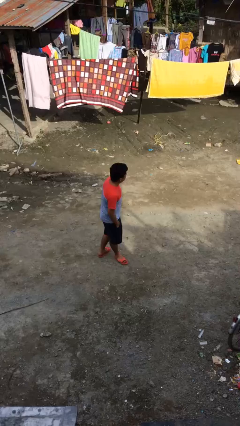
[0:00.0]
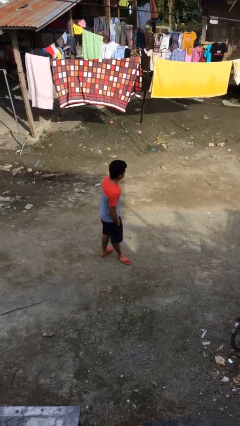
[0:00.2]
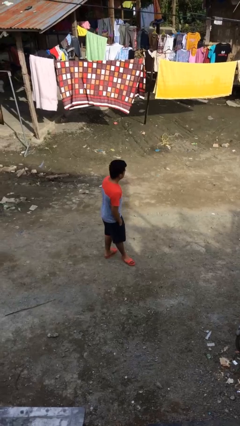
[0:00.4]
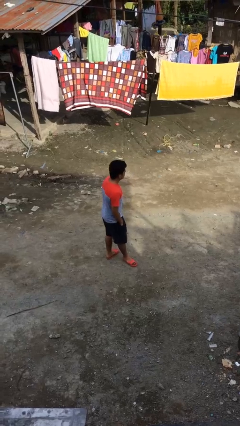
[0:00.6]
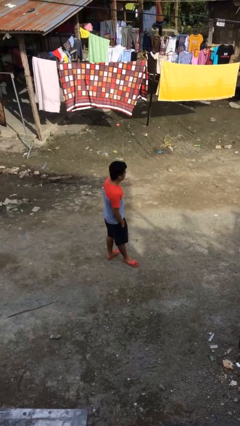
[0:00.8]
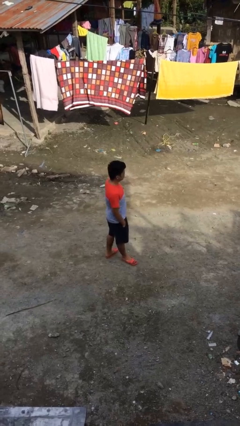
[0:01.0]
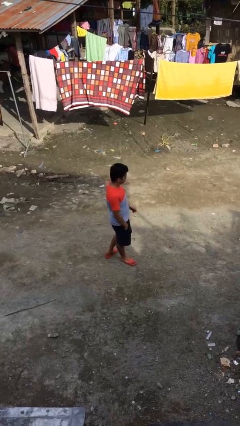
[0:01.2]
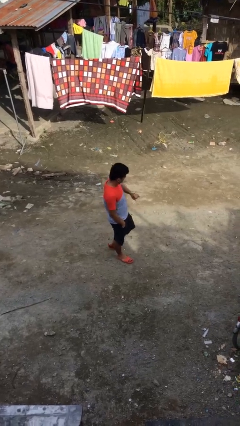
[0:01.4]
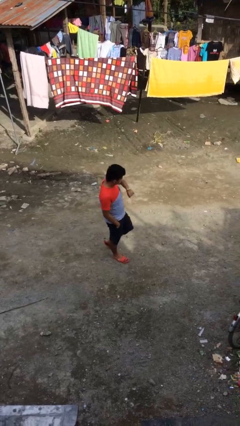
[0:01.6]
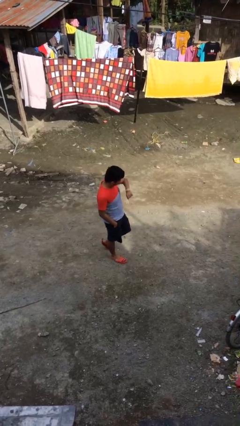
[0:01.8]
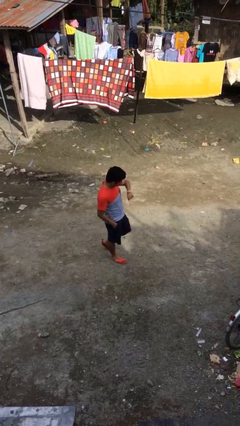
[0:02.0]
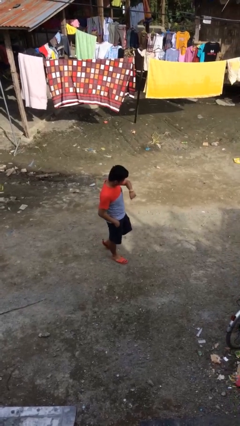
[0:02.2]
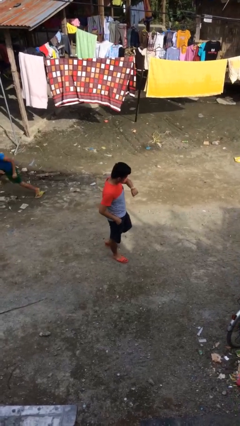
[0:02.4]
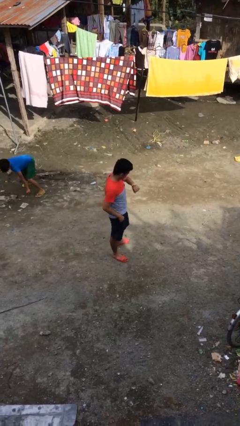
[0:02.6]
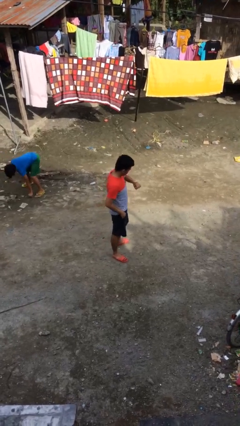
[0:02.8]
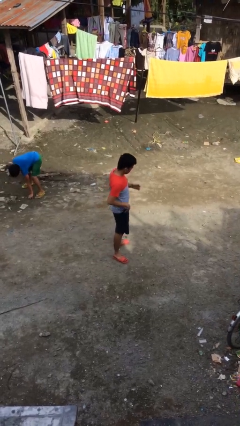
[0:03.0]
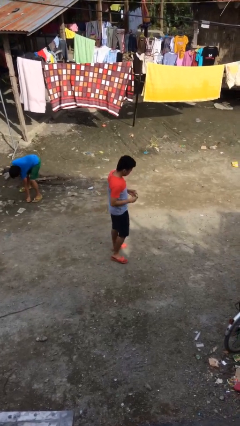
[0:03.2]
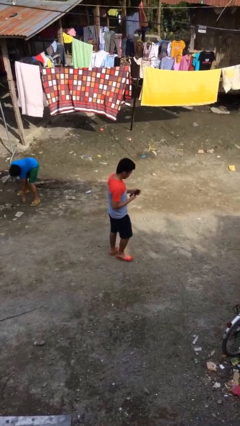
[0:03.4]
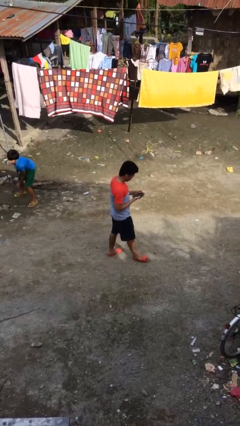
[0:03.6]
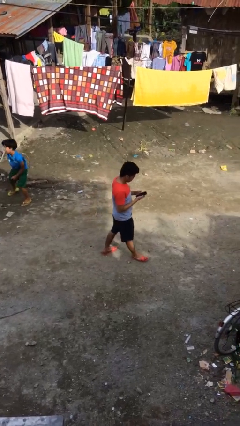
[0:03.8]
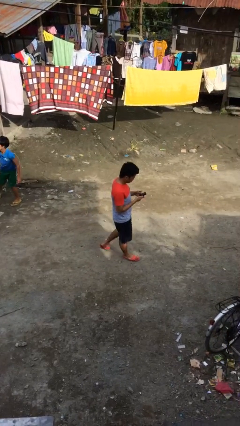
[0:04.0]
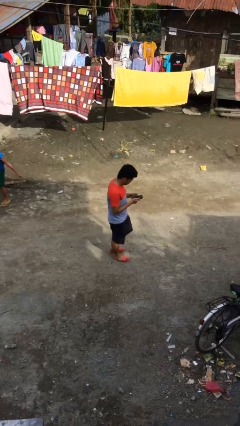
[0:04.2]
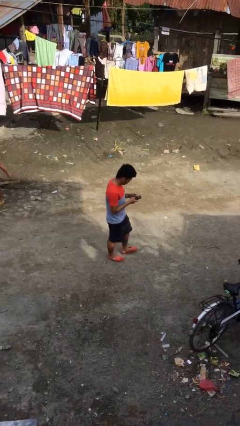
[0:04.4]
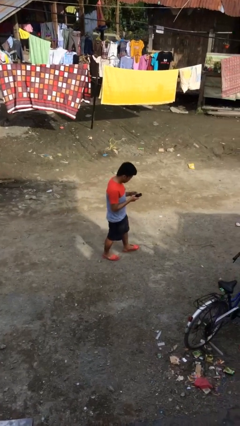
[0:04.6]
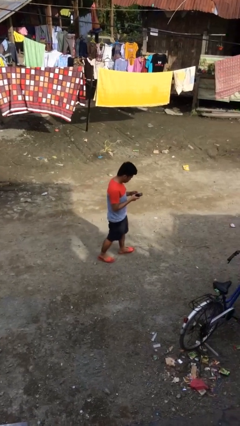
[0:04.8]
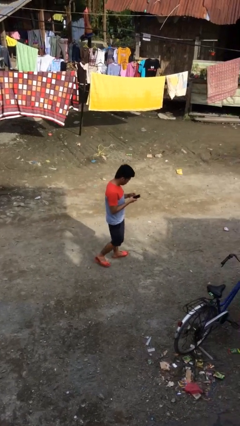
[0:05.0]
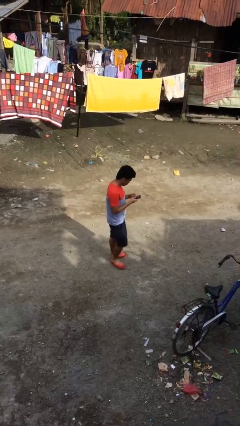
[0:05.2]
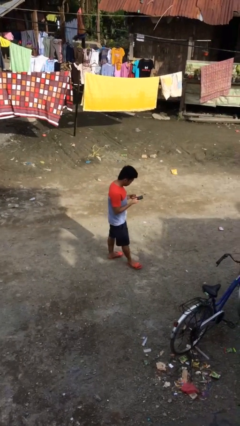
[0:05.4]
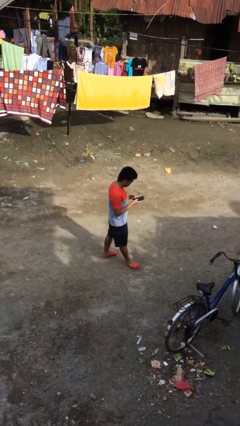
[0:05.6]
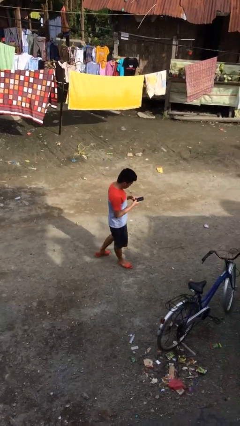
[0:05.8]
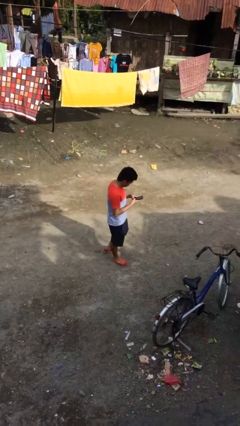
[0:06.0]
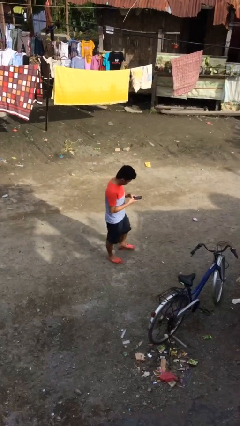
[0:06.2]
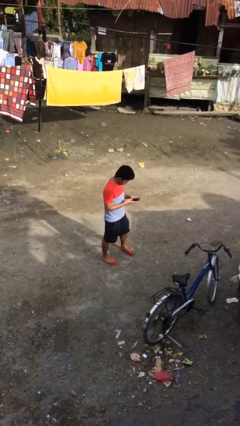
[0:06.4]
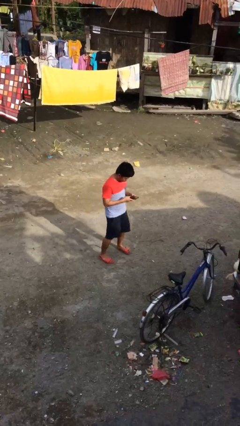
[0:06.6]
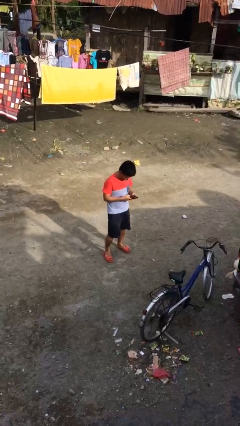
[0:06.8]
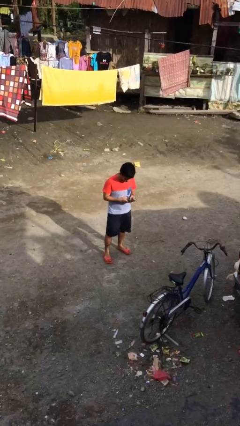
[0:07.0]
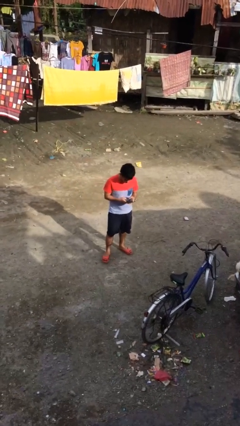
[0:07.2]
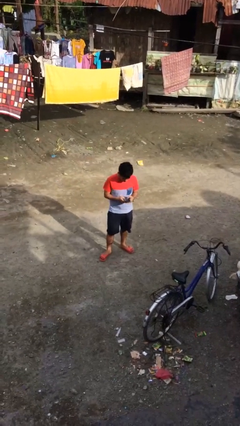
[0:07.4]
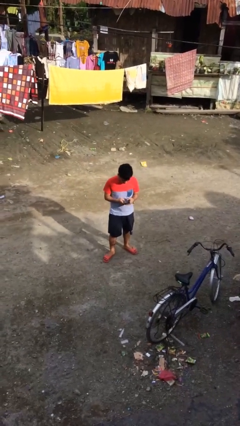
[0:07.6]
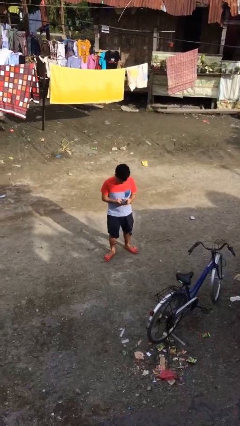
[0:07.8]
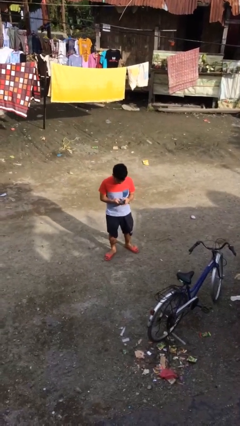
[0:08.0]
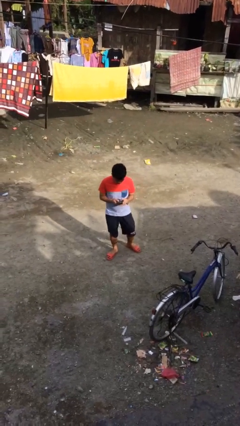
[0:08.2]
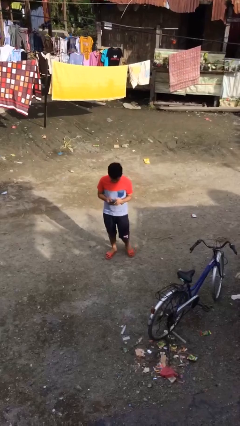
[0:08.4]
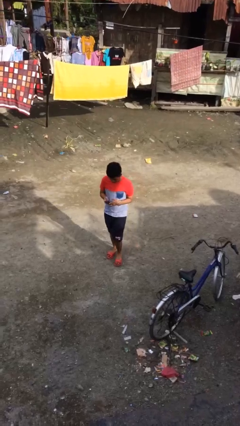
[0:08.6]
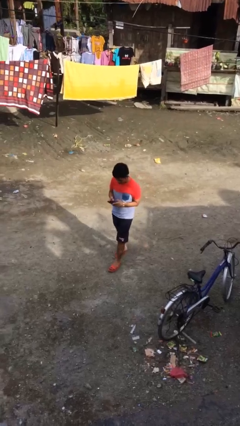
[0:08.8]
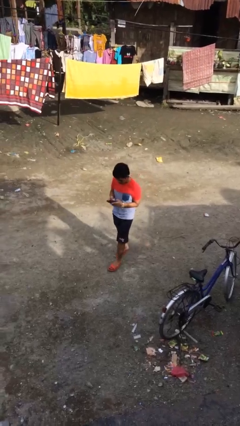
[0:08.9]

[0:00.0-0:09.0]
person walks

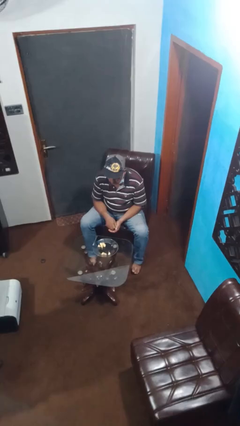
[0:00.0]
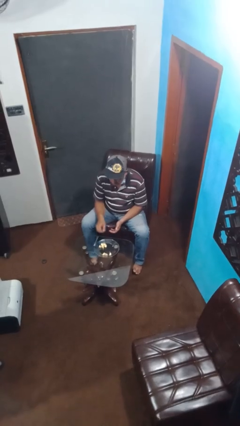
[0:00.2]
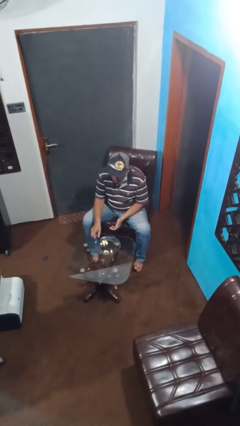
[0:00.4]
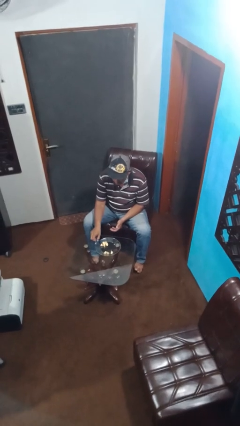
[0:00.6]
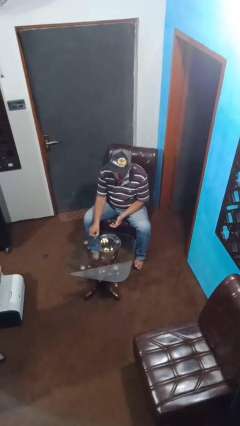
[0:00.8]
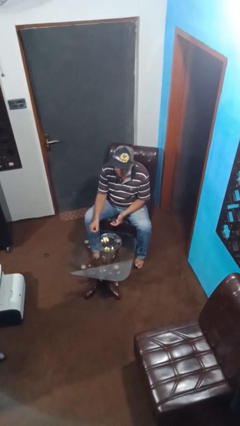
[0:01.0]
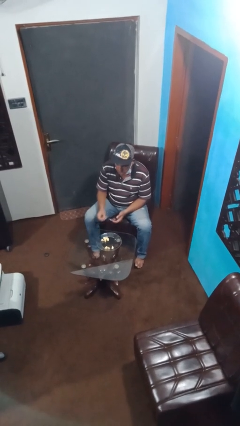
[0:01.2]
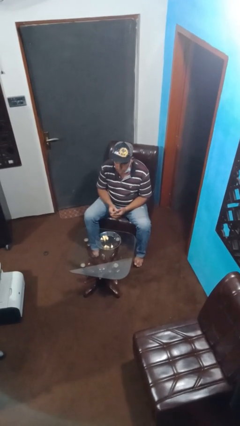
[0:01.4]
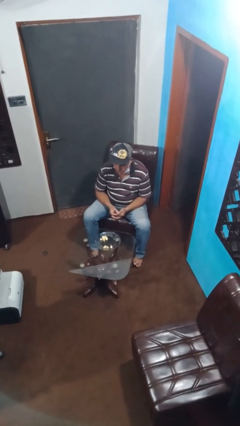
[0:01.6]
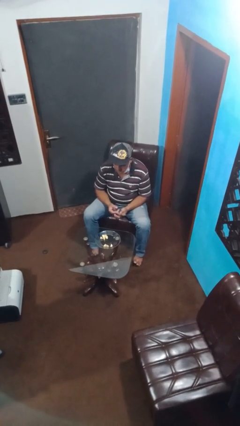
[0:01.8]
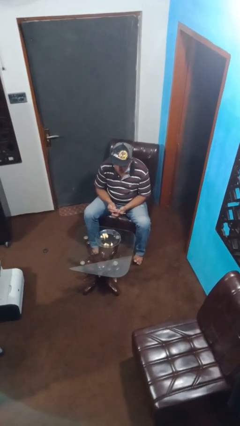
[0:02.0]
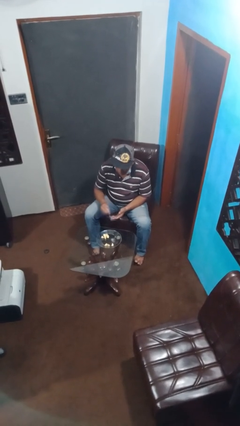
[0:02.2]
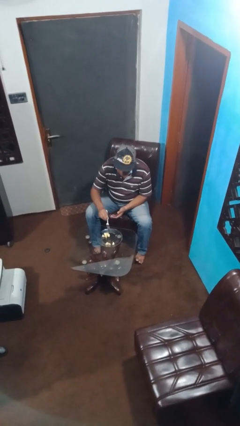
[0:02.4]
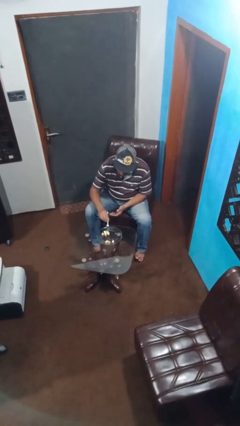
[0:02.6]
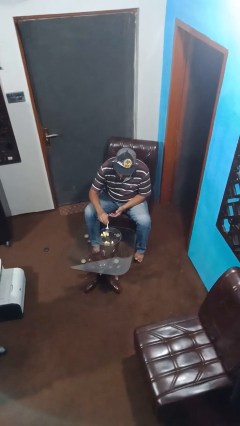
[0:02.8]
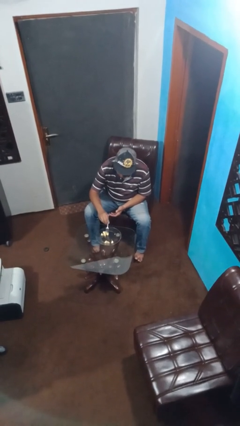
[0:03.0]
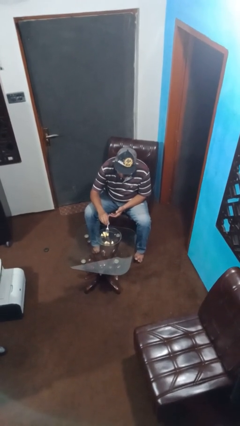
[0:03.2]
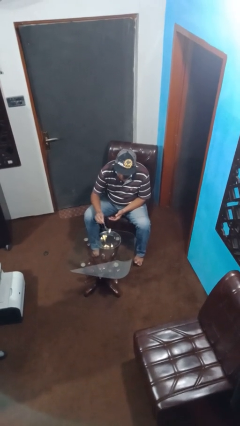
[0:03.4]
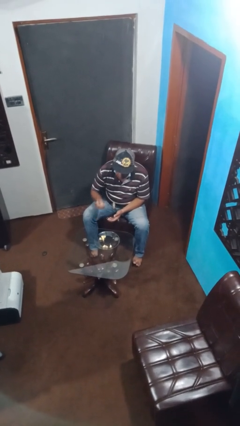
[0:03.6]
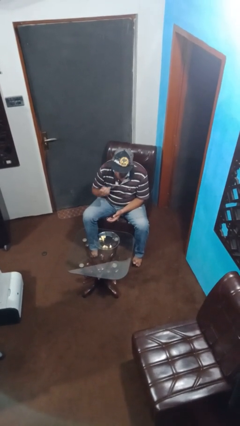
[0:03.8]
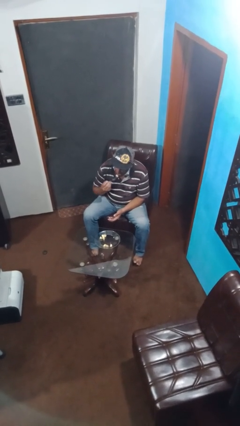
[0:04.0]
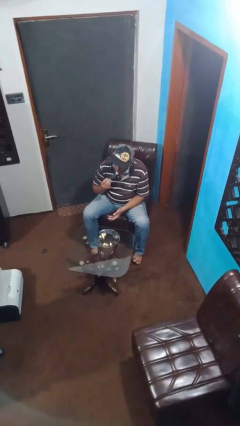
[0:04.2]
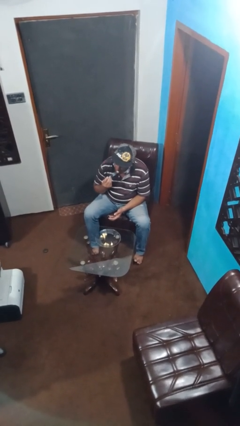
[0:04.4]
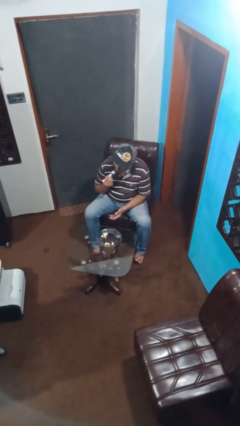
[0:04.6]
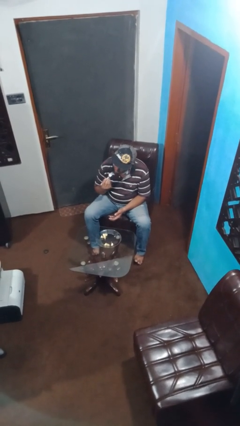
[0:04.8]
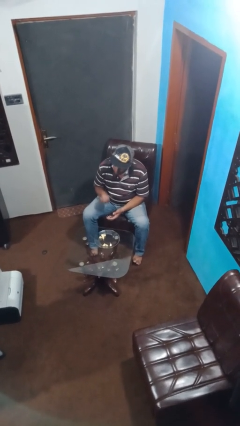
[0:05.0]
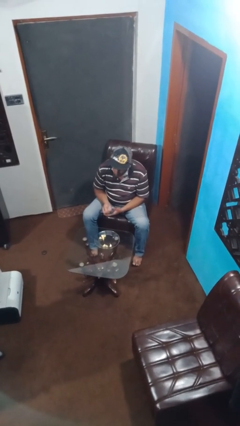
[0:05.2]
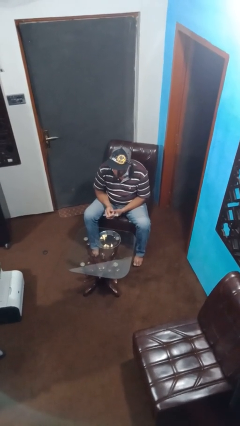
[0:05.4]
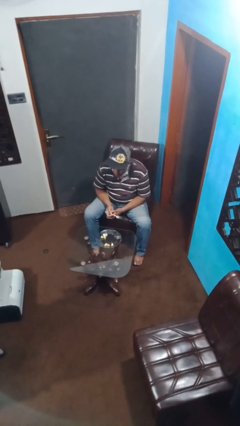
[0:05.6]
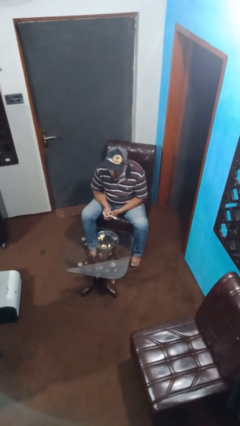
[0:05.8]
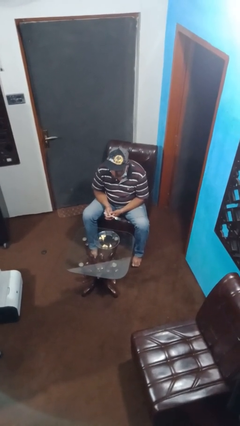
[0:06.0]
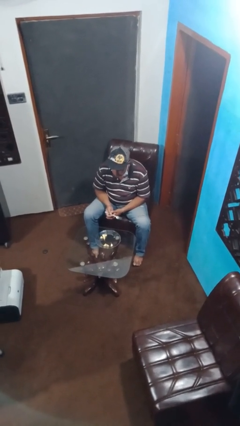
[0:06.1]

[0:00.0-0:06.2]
person eats with utensil

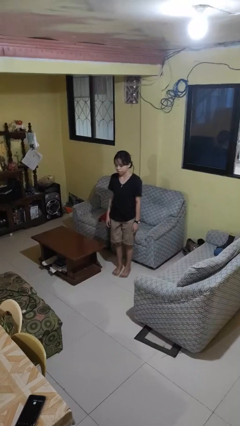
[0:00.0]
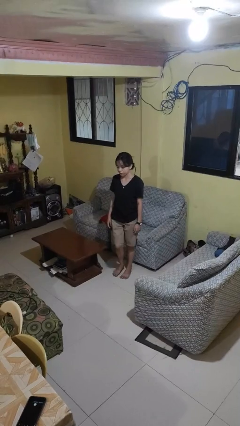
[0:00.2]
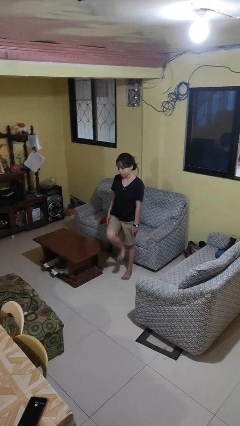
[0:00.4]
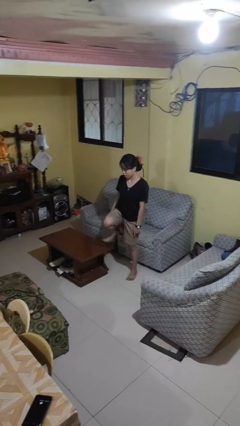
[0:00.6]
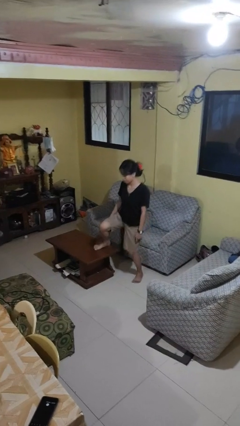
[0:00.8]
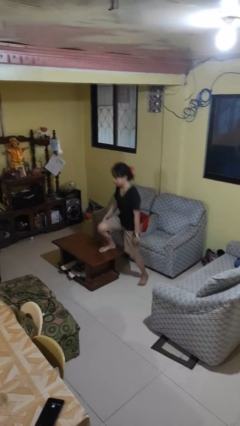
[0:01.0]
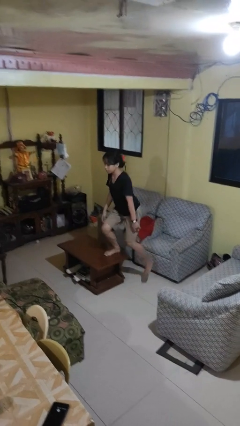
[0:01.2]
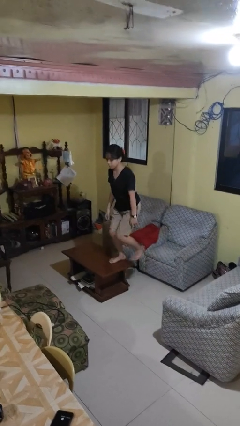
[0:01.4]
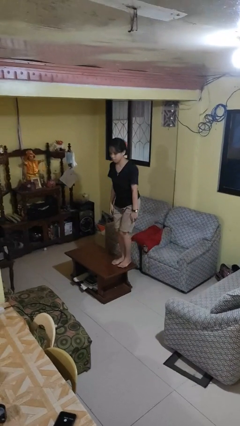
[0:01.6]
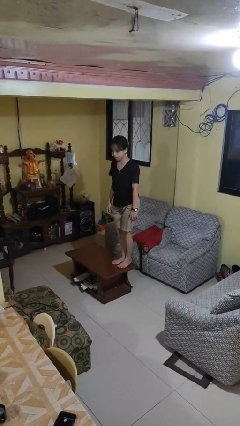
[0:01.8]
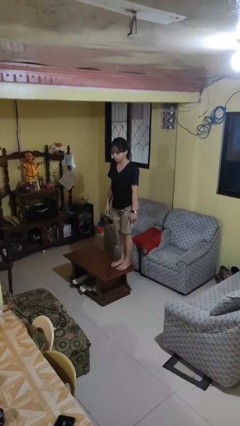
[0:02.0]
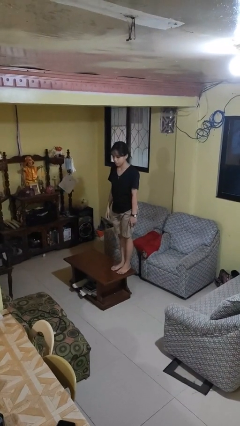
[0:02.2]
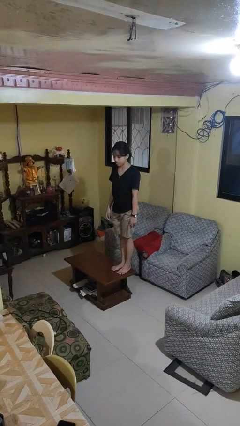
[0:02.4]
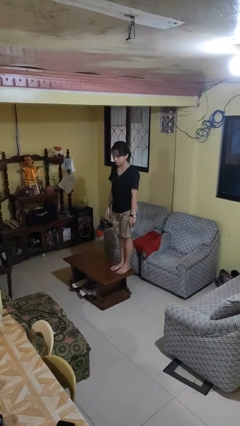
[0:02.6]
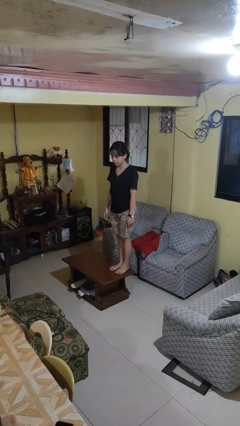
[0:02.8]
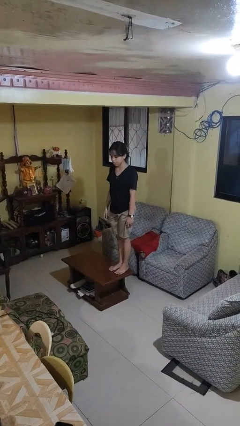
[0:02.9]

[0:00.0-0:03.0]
person climbs on table

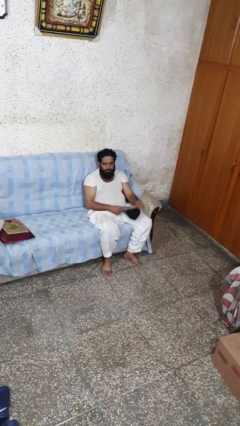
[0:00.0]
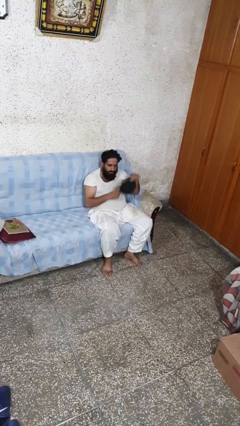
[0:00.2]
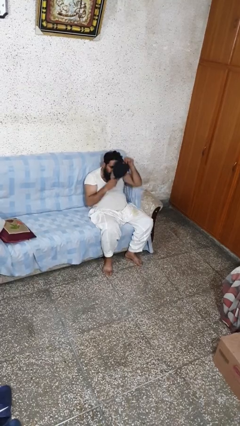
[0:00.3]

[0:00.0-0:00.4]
person puts on hat
